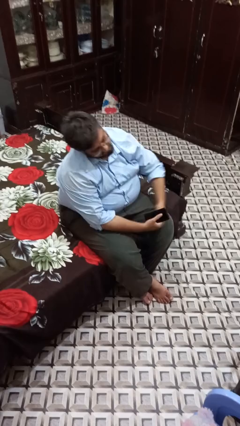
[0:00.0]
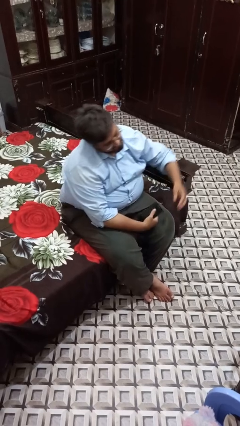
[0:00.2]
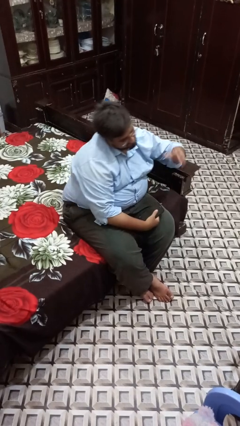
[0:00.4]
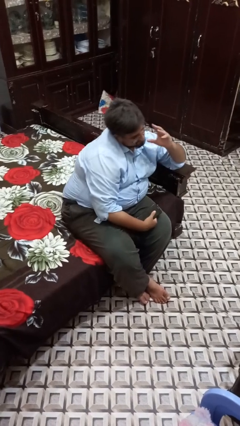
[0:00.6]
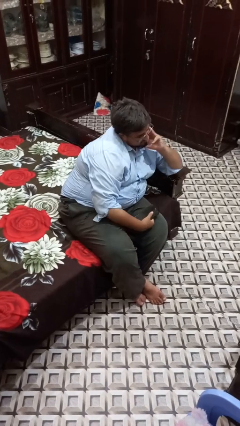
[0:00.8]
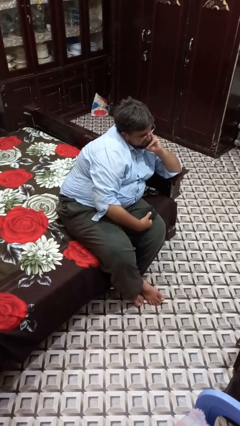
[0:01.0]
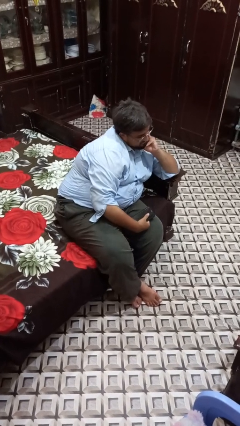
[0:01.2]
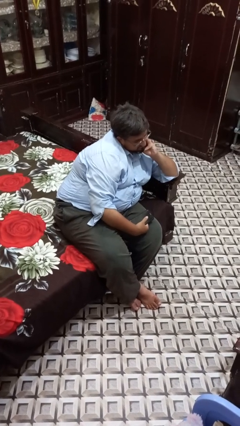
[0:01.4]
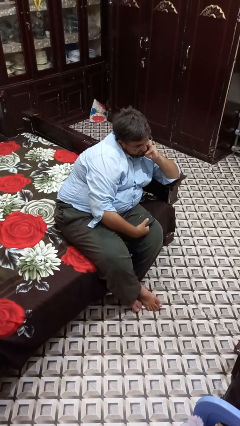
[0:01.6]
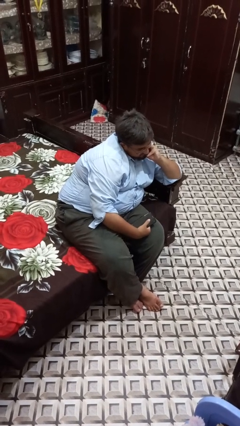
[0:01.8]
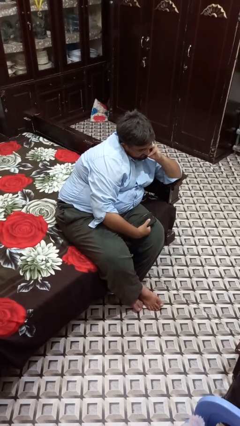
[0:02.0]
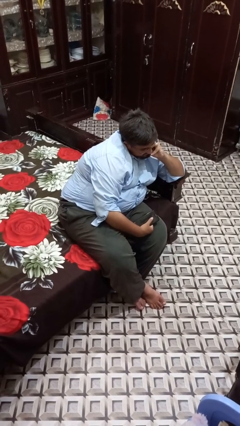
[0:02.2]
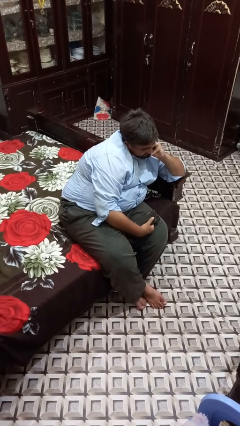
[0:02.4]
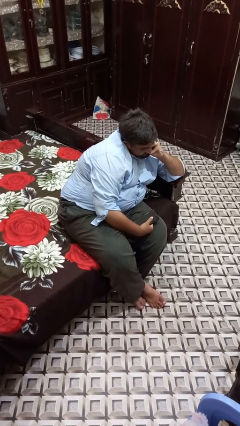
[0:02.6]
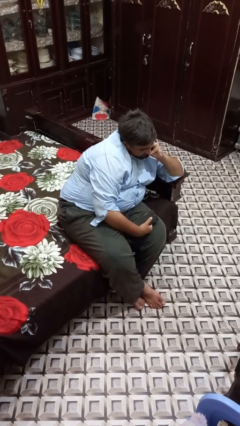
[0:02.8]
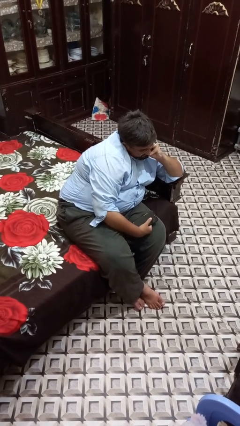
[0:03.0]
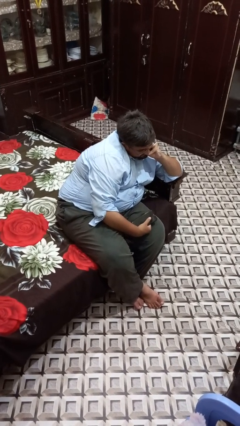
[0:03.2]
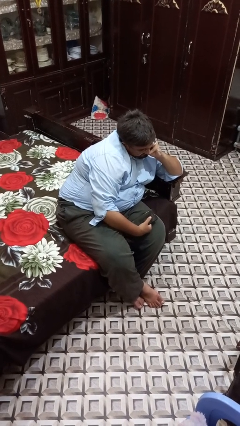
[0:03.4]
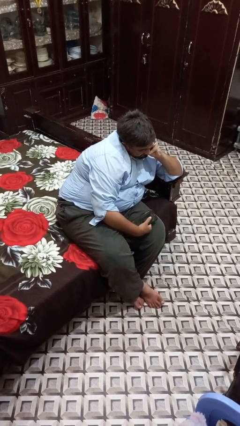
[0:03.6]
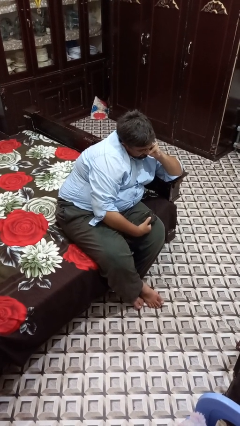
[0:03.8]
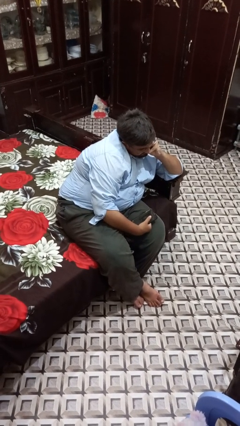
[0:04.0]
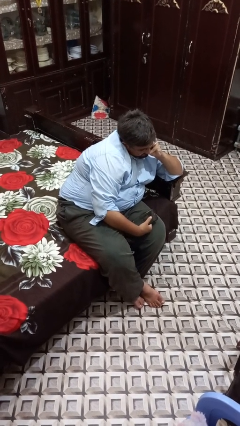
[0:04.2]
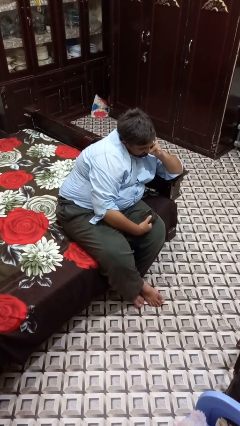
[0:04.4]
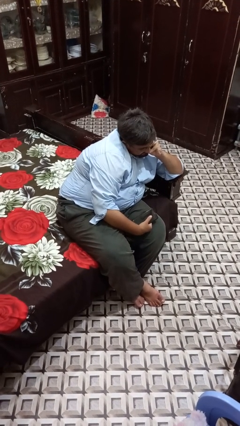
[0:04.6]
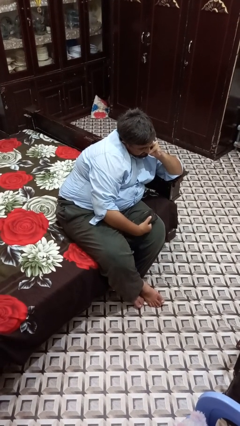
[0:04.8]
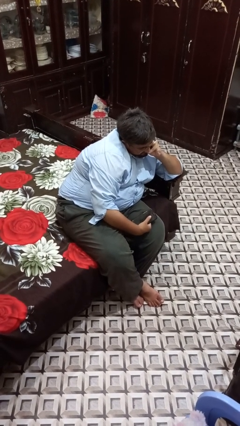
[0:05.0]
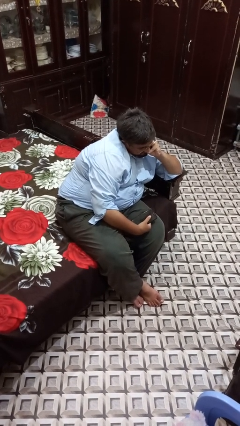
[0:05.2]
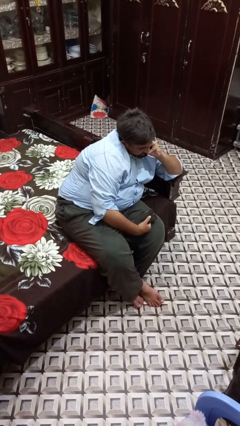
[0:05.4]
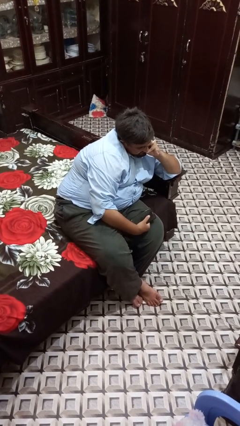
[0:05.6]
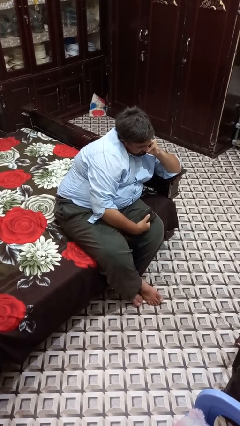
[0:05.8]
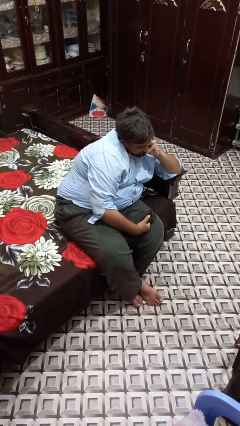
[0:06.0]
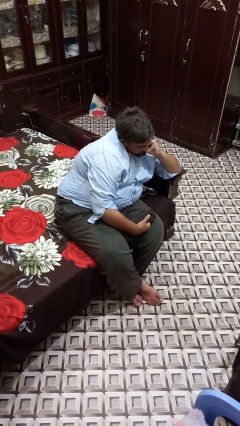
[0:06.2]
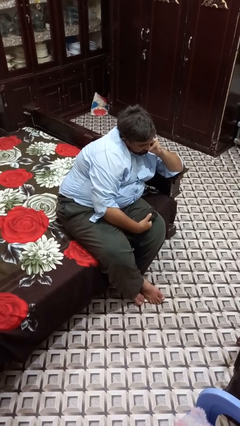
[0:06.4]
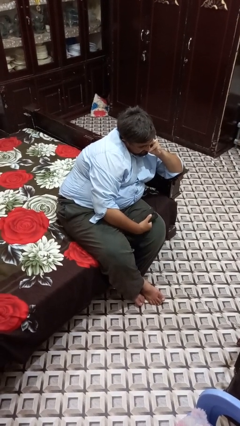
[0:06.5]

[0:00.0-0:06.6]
person strokes chin

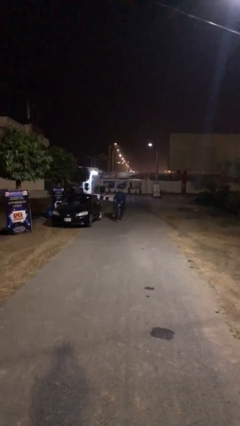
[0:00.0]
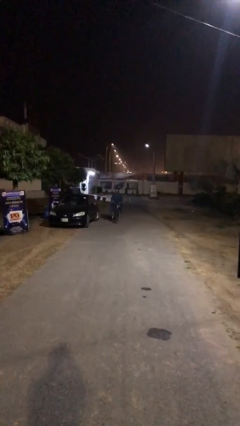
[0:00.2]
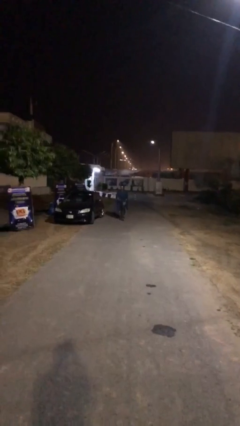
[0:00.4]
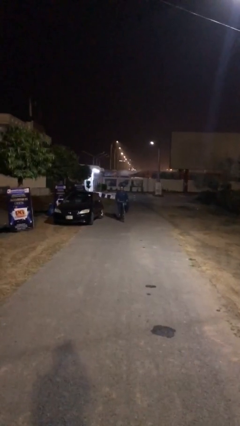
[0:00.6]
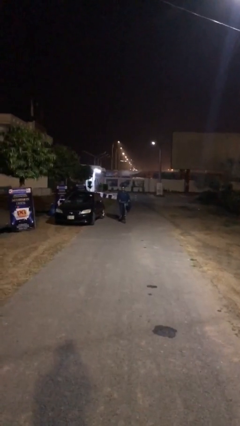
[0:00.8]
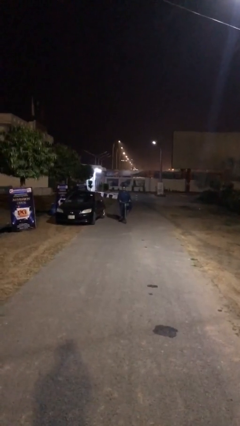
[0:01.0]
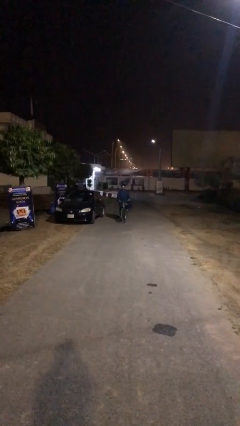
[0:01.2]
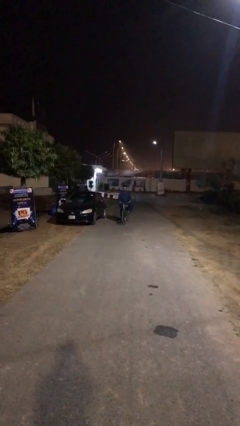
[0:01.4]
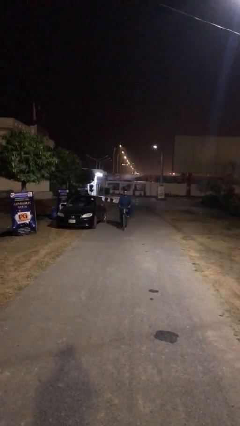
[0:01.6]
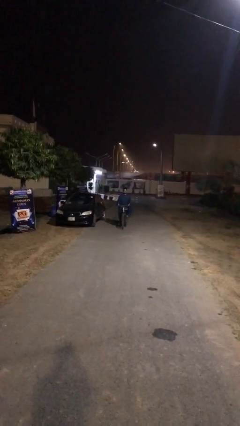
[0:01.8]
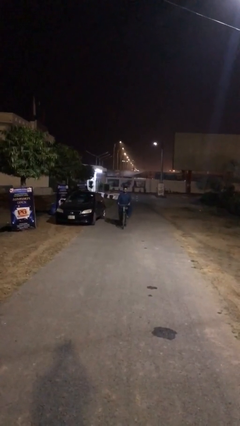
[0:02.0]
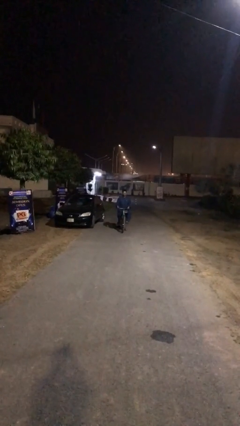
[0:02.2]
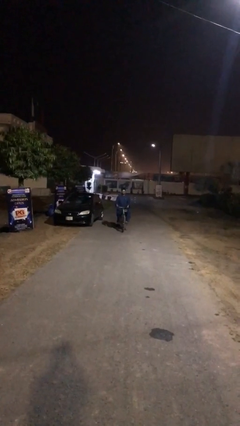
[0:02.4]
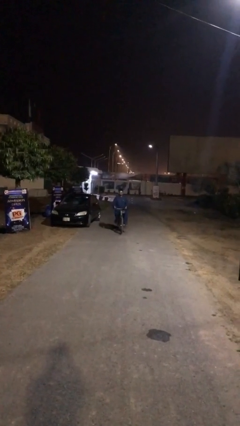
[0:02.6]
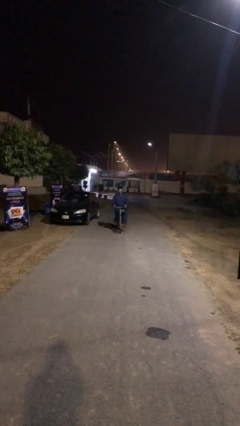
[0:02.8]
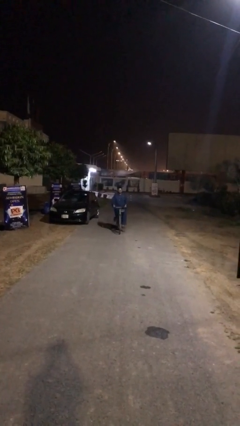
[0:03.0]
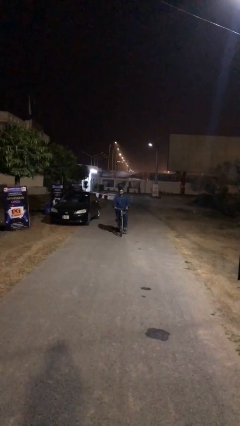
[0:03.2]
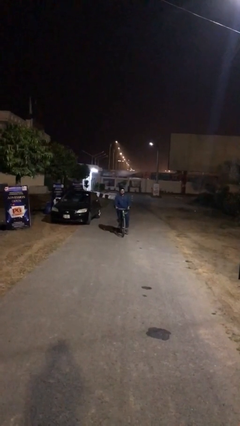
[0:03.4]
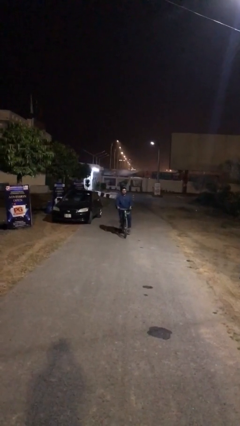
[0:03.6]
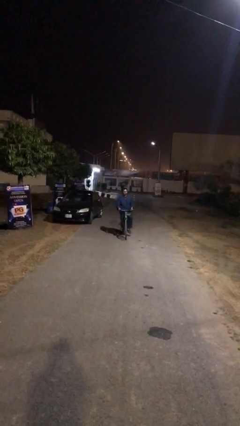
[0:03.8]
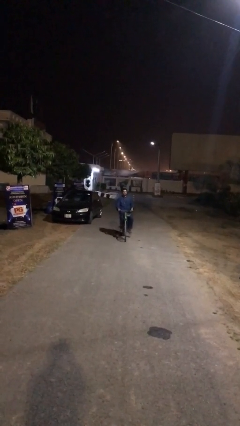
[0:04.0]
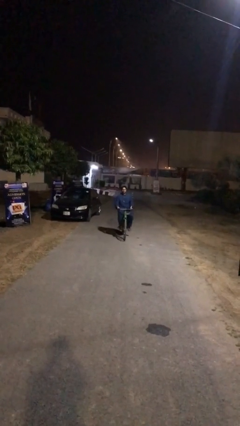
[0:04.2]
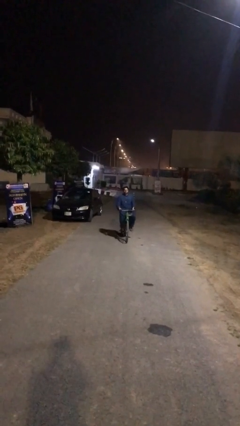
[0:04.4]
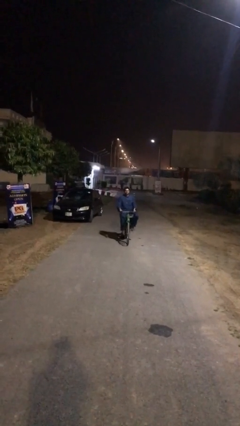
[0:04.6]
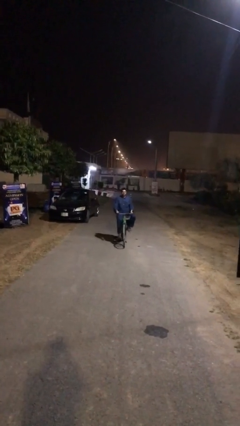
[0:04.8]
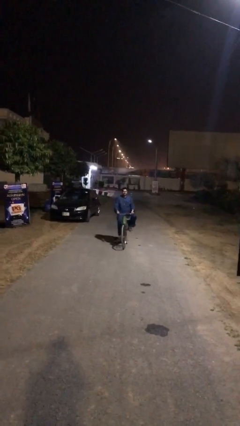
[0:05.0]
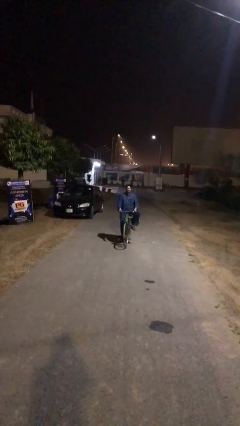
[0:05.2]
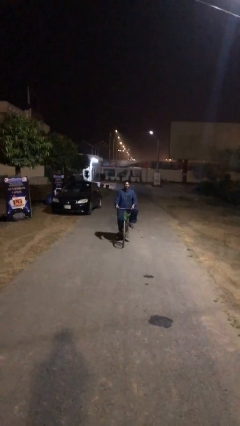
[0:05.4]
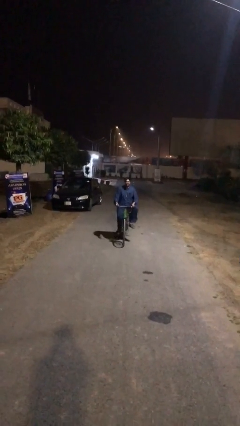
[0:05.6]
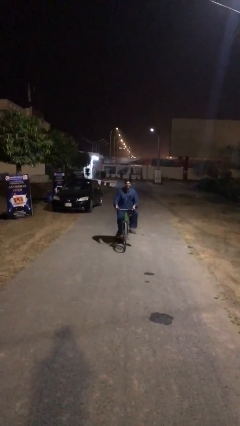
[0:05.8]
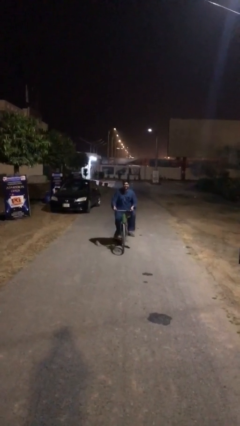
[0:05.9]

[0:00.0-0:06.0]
person rides bicycle

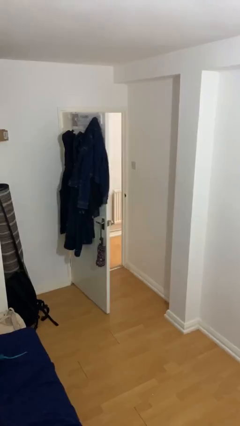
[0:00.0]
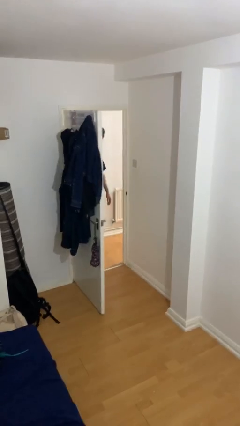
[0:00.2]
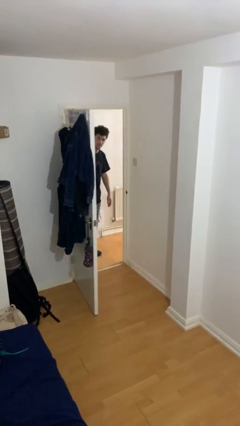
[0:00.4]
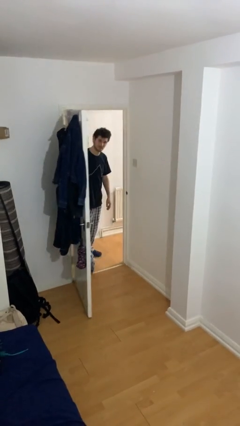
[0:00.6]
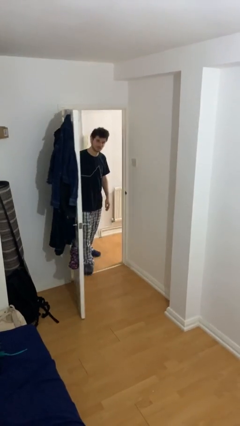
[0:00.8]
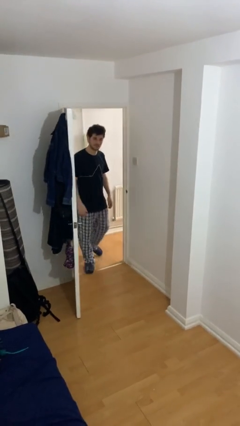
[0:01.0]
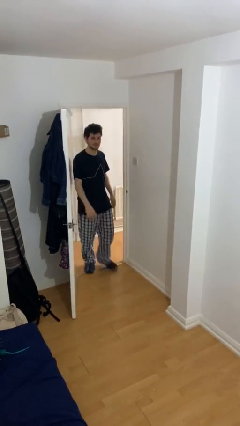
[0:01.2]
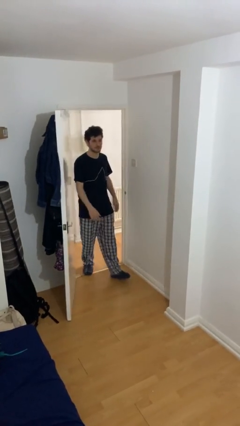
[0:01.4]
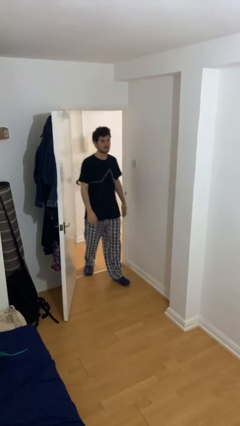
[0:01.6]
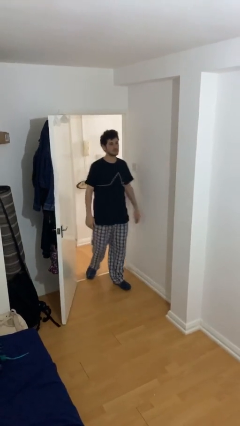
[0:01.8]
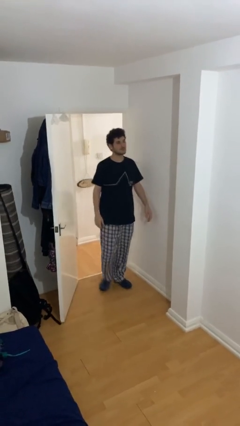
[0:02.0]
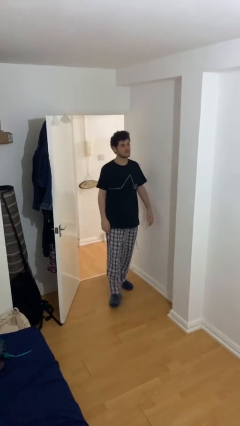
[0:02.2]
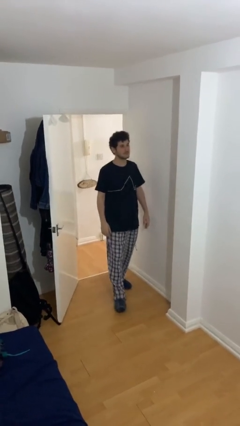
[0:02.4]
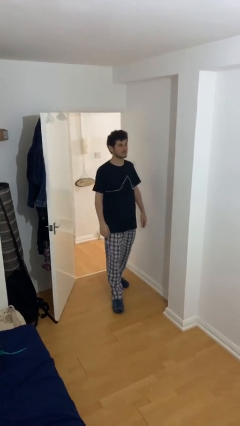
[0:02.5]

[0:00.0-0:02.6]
person enters scene through structure

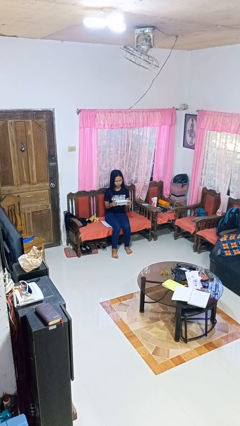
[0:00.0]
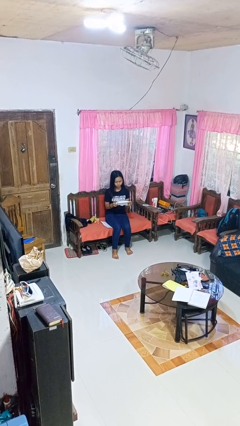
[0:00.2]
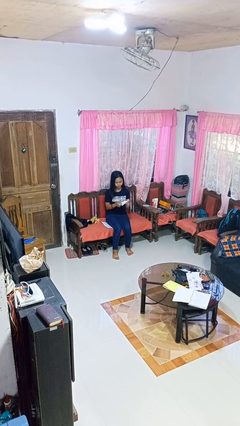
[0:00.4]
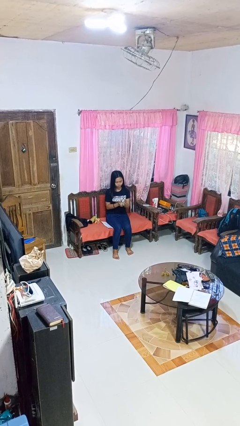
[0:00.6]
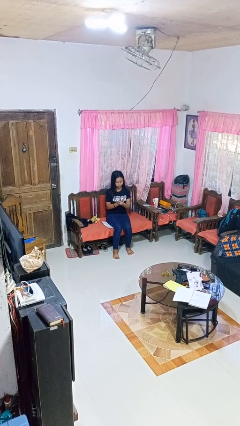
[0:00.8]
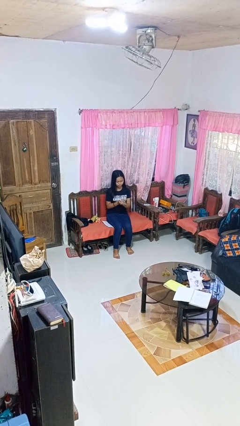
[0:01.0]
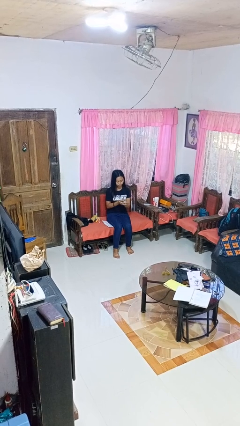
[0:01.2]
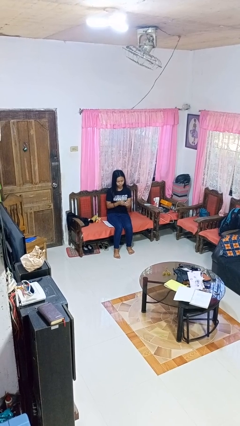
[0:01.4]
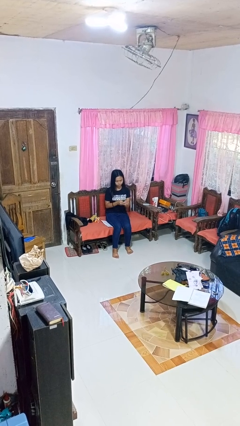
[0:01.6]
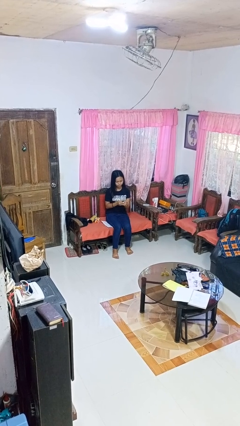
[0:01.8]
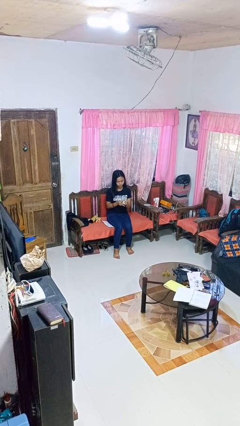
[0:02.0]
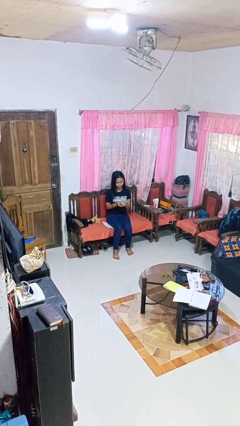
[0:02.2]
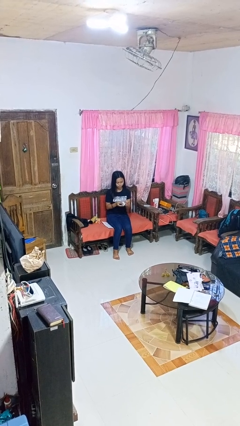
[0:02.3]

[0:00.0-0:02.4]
person crumples paper
